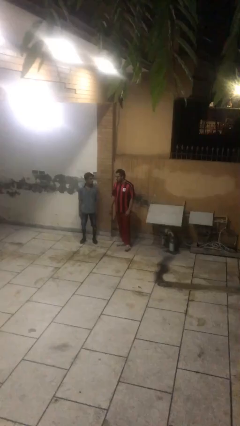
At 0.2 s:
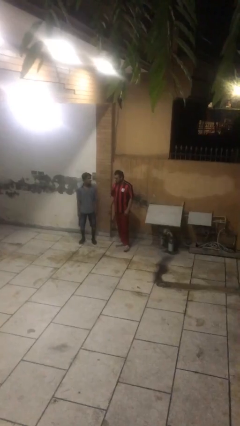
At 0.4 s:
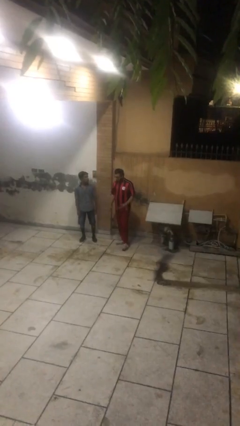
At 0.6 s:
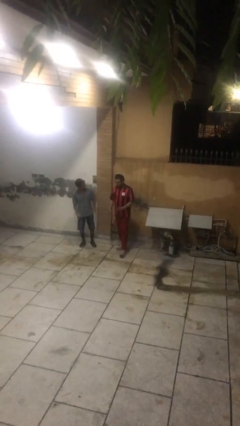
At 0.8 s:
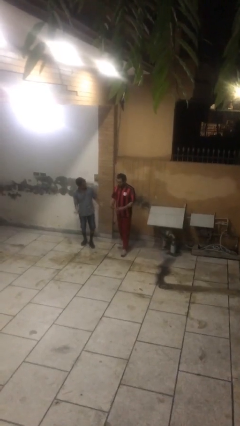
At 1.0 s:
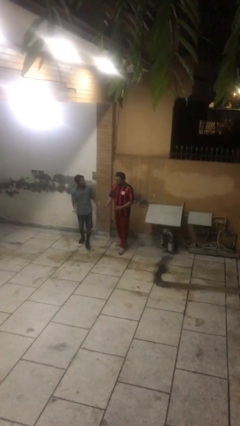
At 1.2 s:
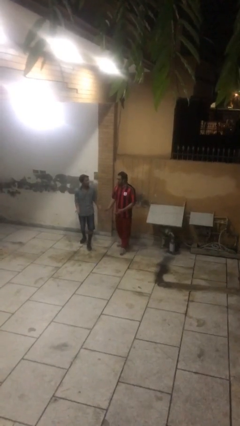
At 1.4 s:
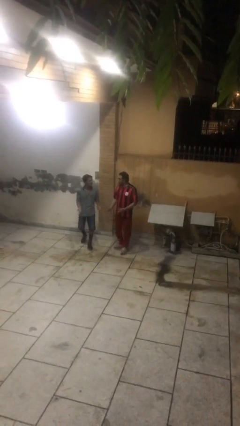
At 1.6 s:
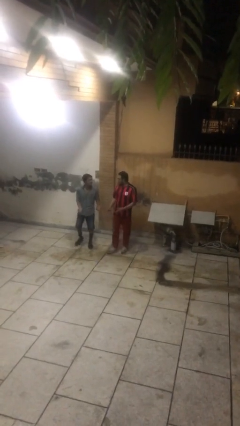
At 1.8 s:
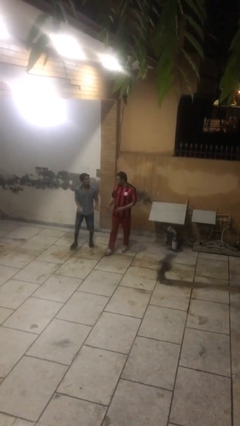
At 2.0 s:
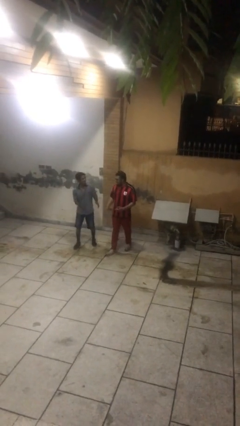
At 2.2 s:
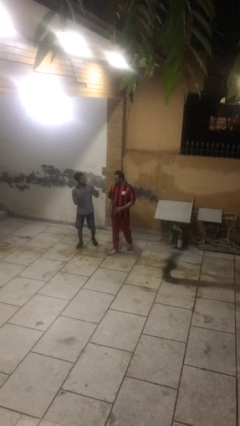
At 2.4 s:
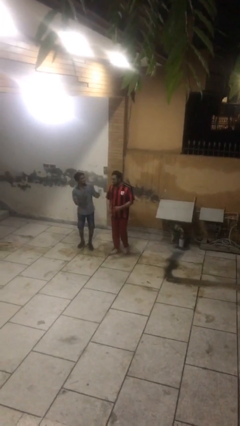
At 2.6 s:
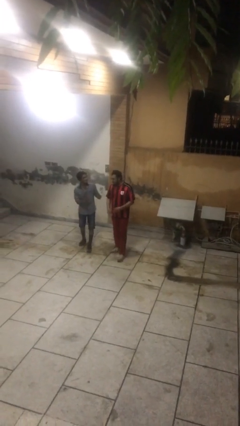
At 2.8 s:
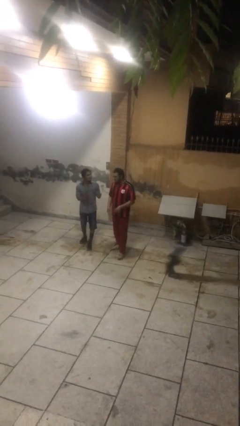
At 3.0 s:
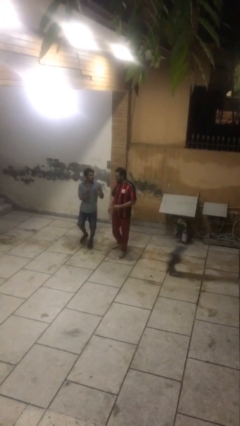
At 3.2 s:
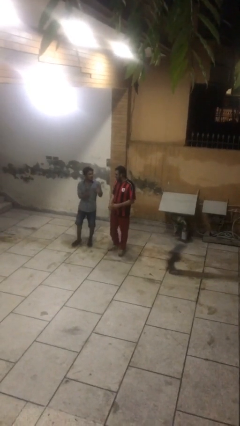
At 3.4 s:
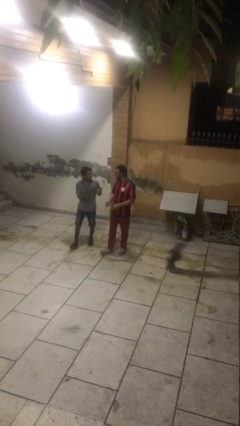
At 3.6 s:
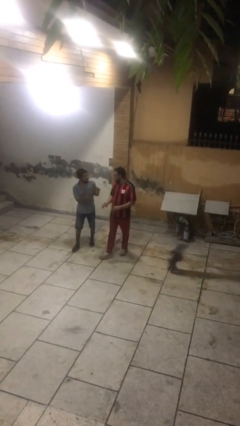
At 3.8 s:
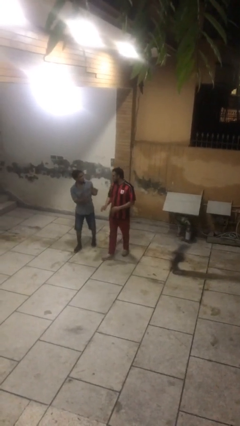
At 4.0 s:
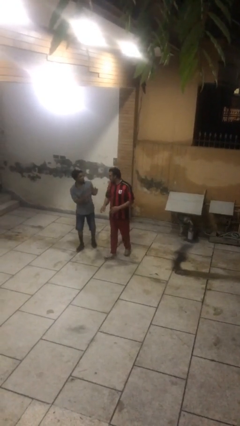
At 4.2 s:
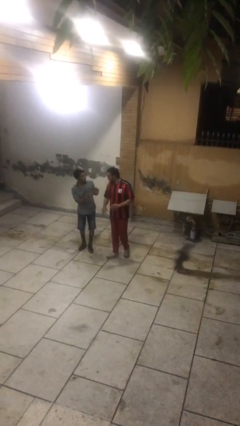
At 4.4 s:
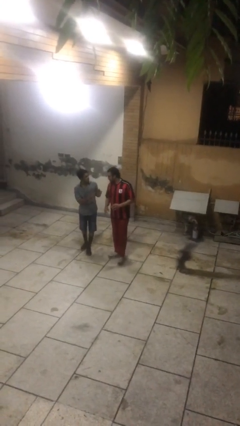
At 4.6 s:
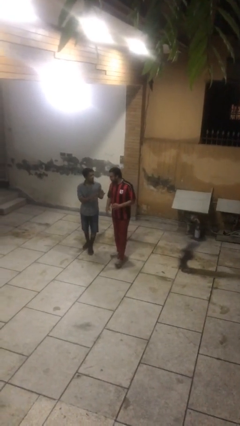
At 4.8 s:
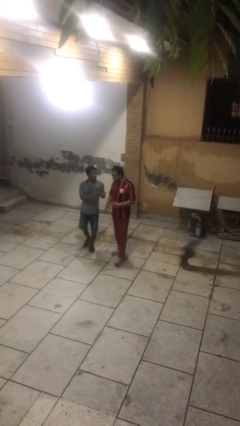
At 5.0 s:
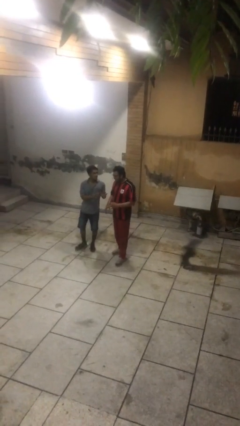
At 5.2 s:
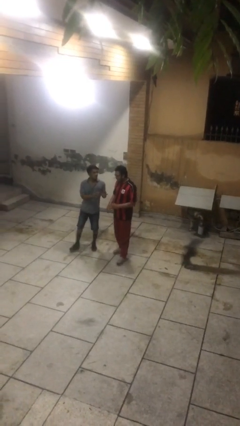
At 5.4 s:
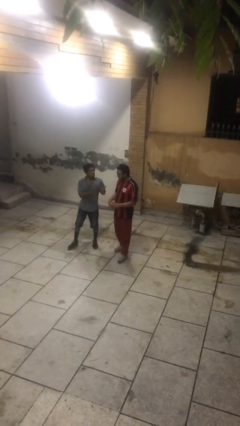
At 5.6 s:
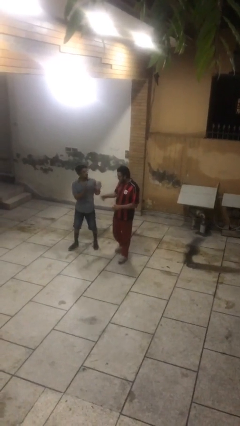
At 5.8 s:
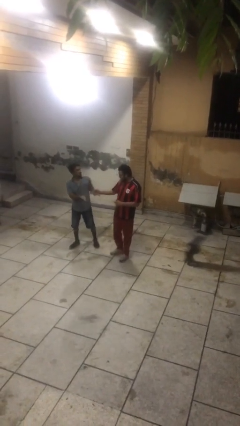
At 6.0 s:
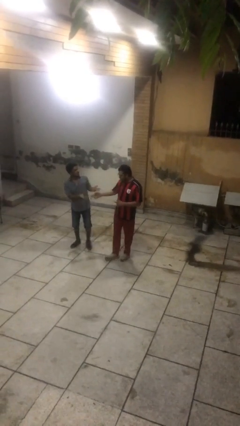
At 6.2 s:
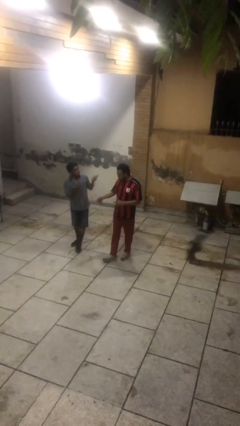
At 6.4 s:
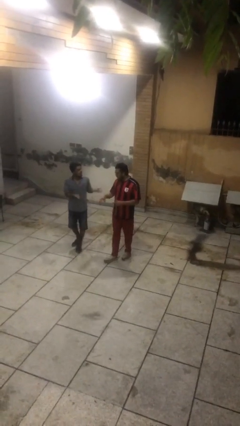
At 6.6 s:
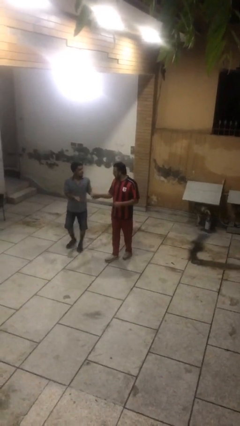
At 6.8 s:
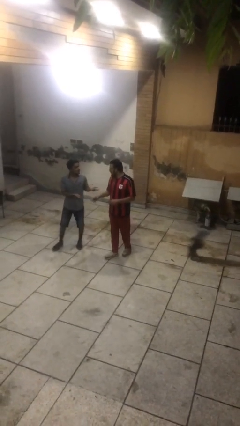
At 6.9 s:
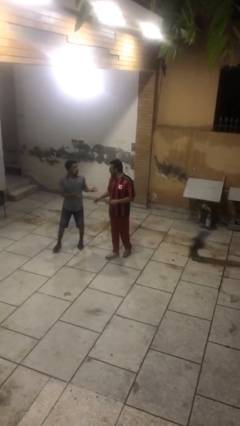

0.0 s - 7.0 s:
person talks to person

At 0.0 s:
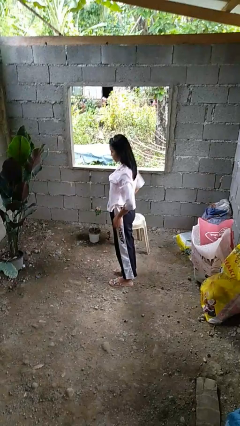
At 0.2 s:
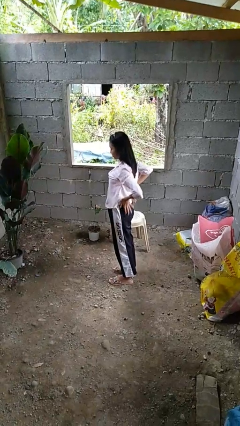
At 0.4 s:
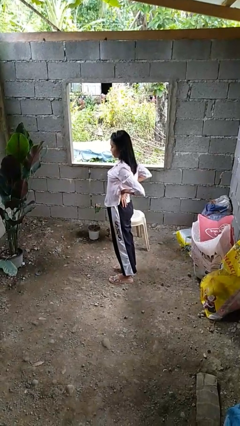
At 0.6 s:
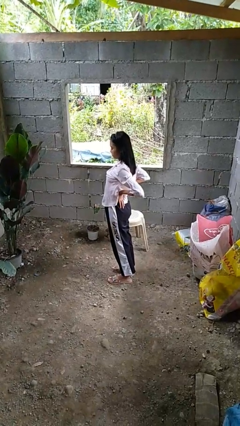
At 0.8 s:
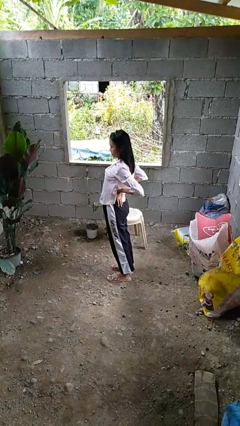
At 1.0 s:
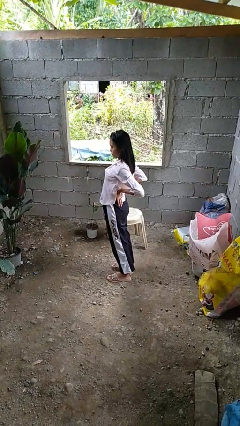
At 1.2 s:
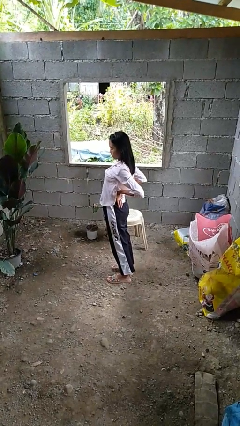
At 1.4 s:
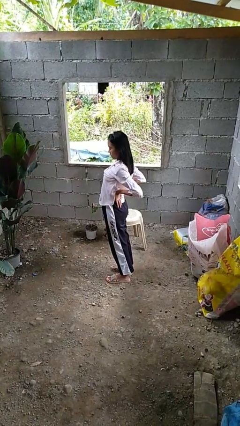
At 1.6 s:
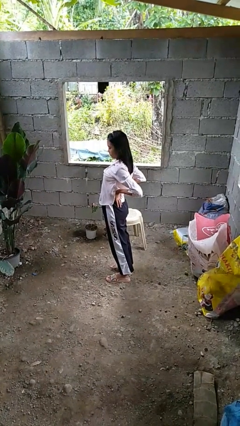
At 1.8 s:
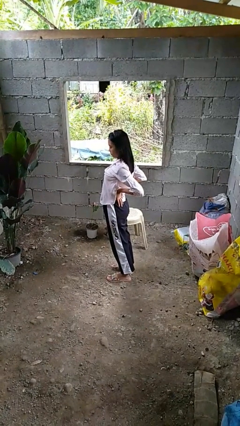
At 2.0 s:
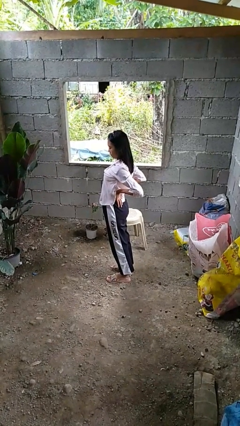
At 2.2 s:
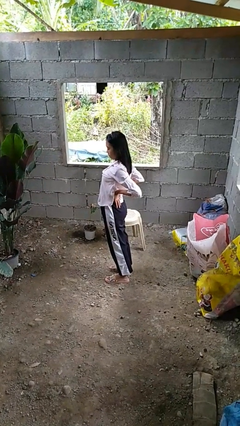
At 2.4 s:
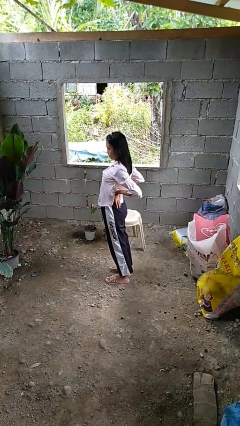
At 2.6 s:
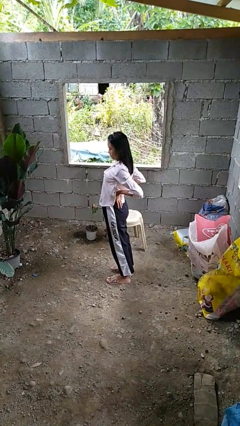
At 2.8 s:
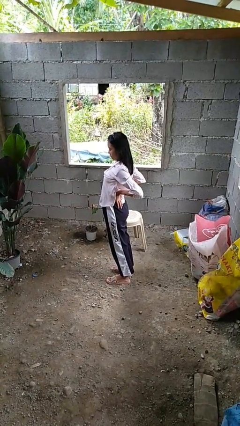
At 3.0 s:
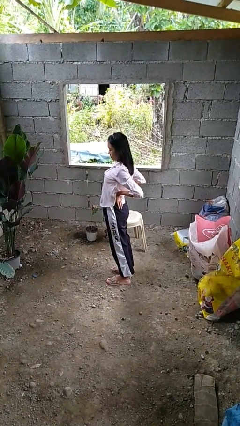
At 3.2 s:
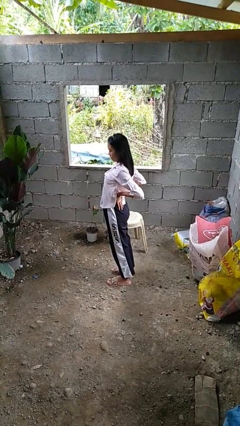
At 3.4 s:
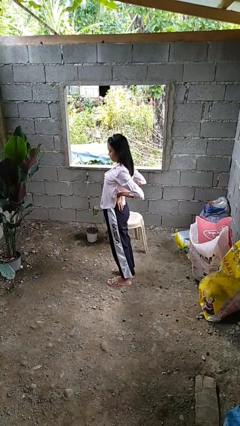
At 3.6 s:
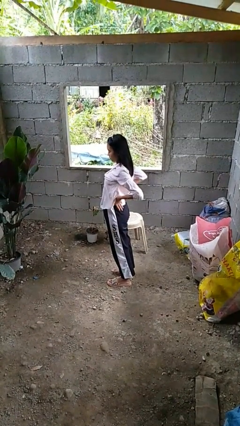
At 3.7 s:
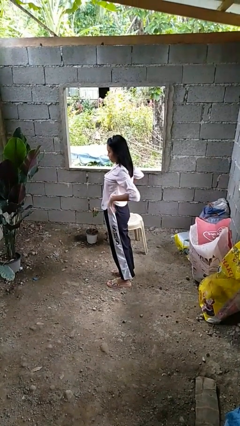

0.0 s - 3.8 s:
person stretches back

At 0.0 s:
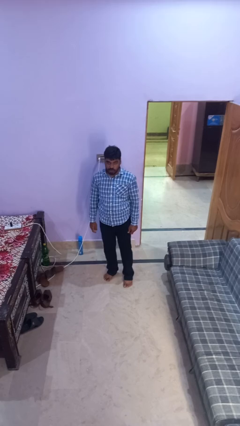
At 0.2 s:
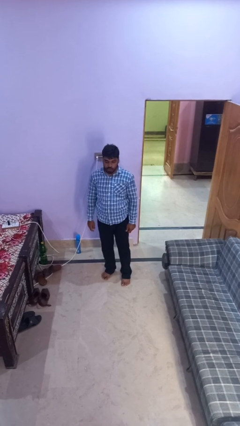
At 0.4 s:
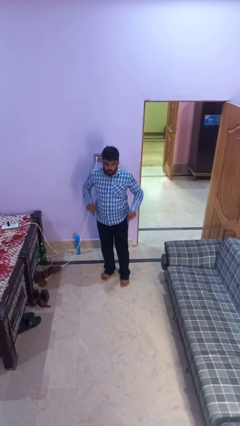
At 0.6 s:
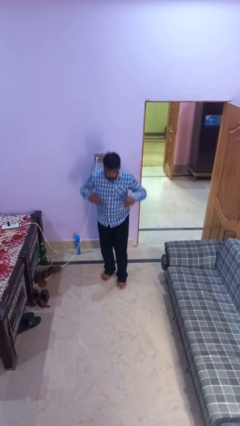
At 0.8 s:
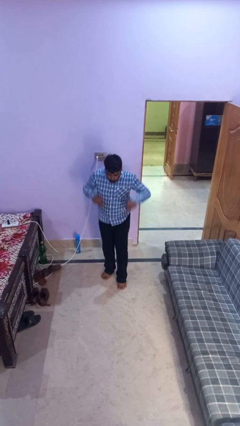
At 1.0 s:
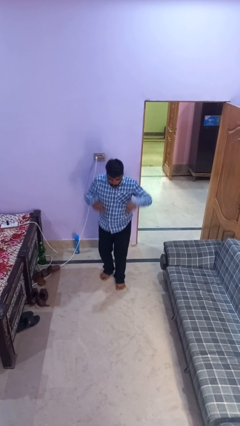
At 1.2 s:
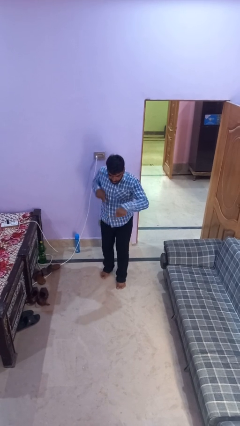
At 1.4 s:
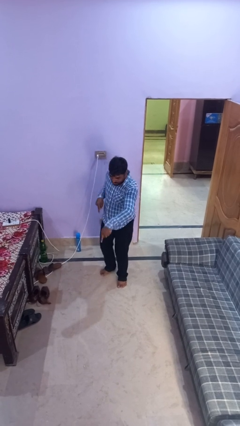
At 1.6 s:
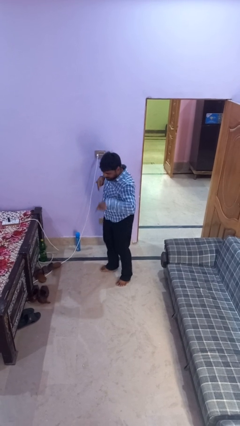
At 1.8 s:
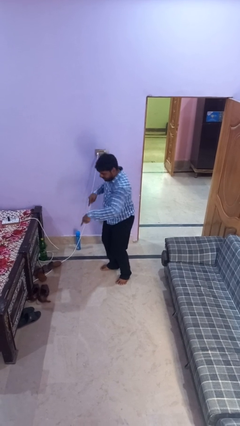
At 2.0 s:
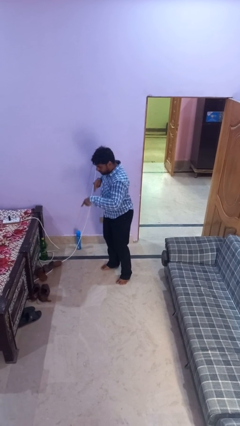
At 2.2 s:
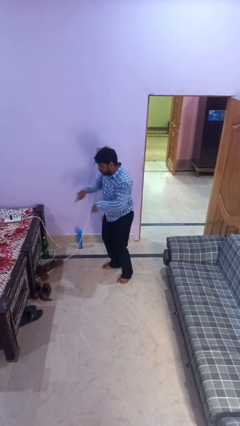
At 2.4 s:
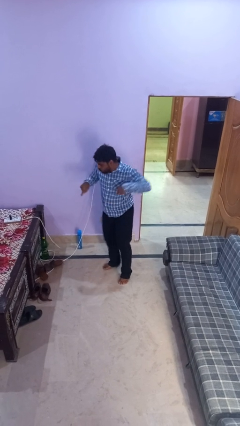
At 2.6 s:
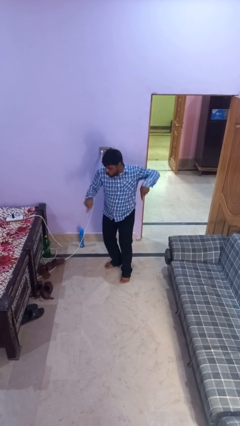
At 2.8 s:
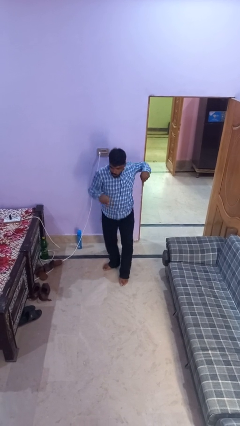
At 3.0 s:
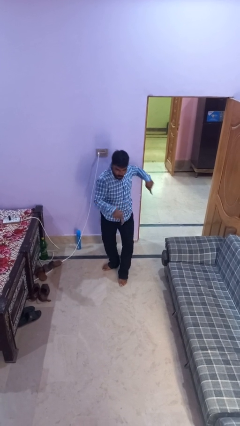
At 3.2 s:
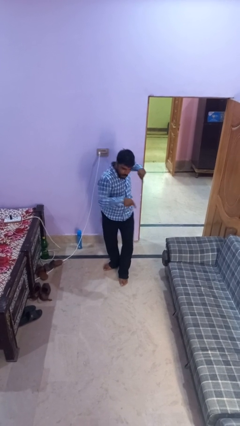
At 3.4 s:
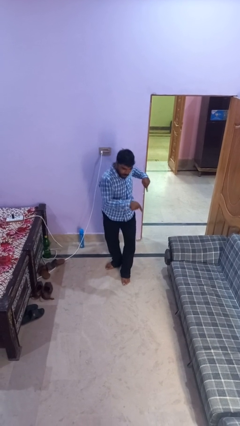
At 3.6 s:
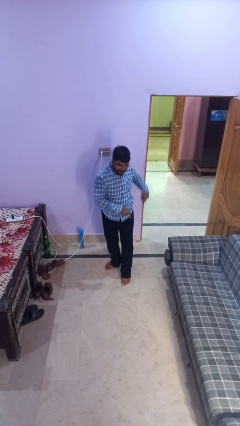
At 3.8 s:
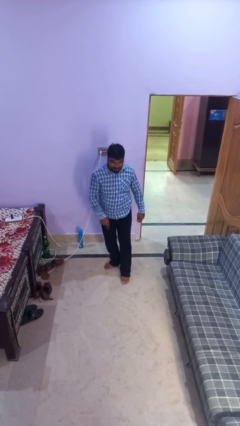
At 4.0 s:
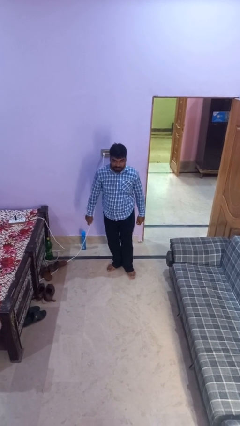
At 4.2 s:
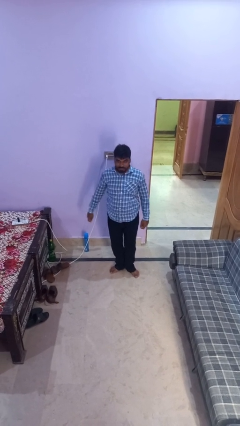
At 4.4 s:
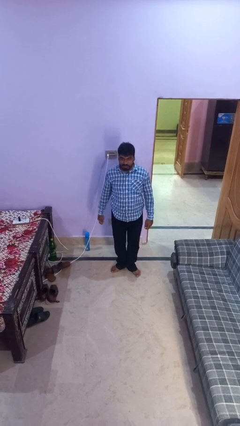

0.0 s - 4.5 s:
person dances in place

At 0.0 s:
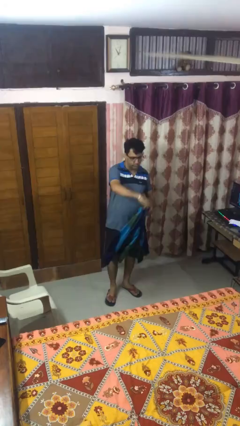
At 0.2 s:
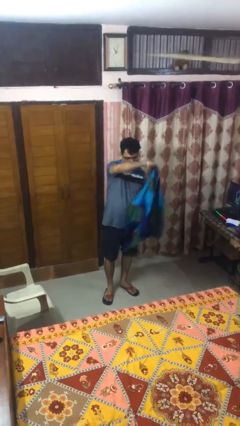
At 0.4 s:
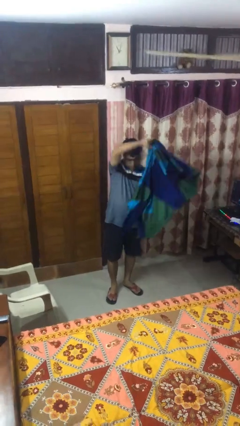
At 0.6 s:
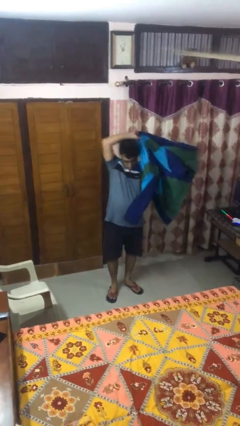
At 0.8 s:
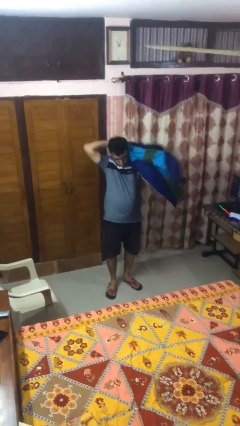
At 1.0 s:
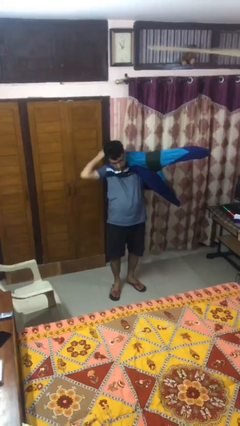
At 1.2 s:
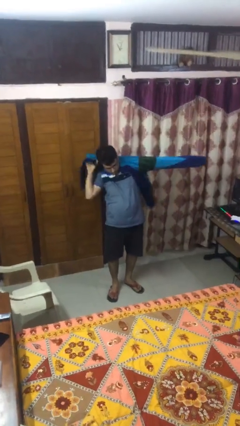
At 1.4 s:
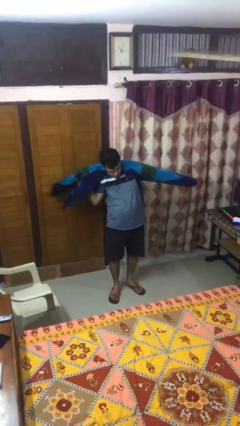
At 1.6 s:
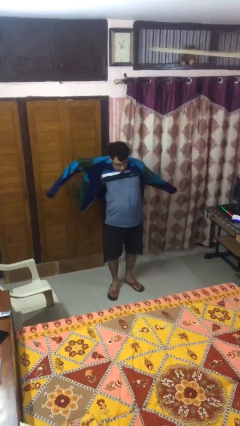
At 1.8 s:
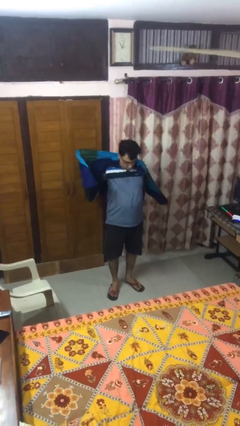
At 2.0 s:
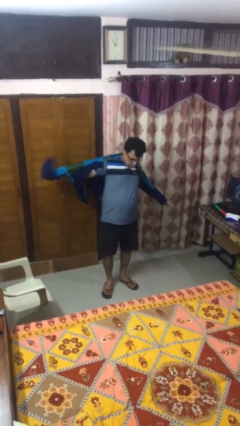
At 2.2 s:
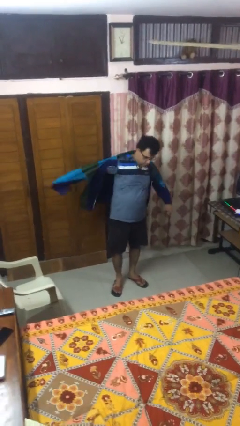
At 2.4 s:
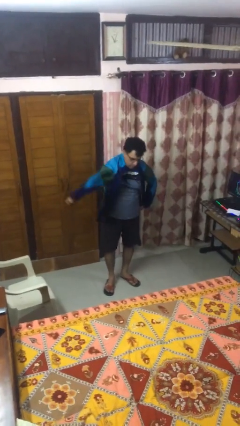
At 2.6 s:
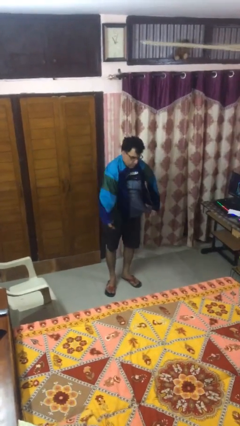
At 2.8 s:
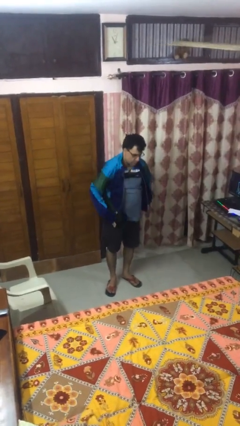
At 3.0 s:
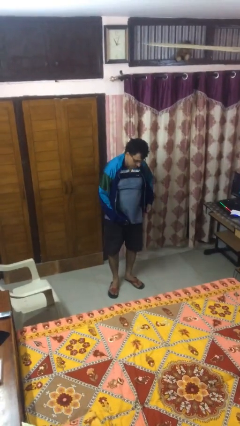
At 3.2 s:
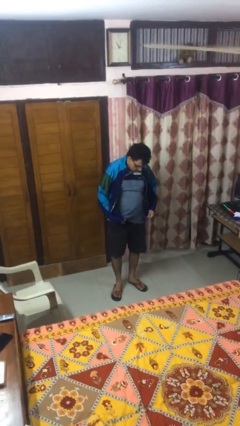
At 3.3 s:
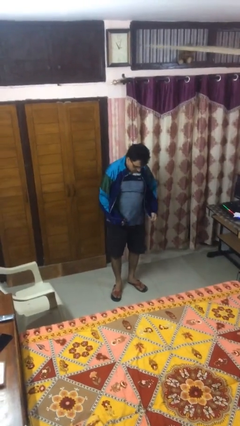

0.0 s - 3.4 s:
person puts on jacket
